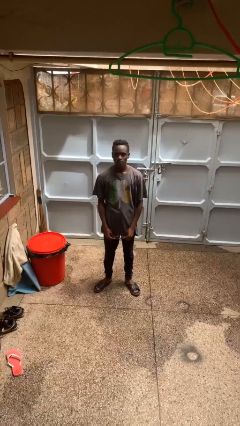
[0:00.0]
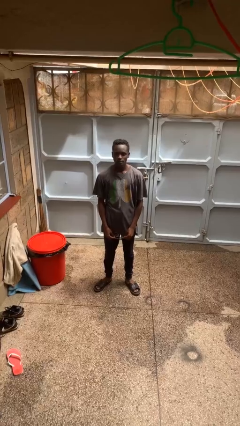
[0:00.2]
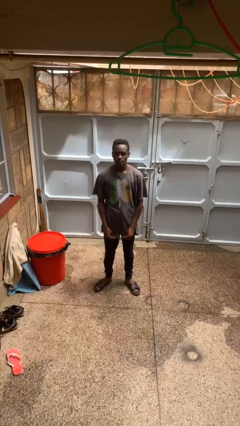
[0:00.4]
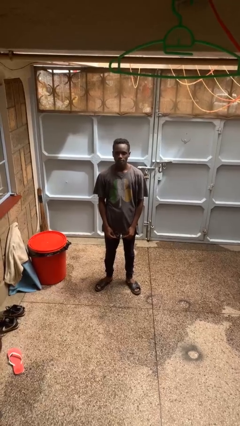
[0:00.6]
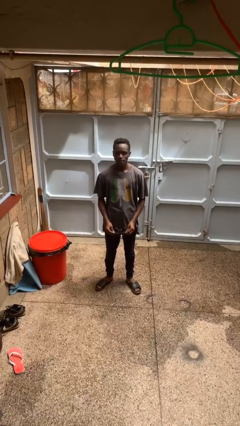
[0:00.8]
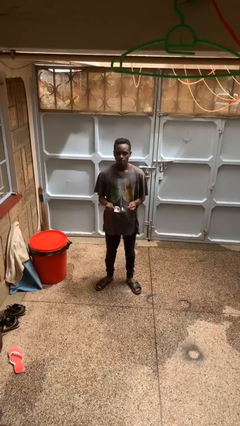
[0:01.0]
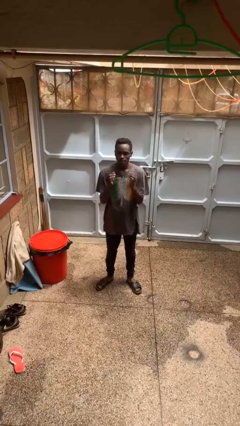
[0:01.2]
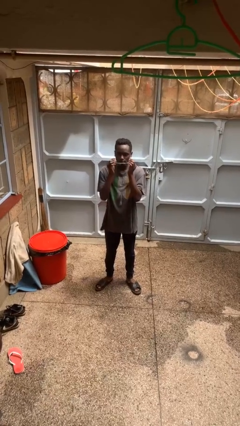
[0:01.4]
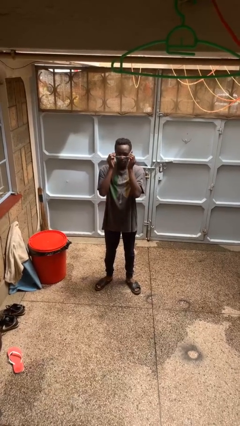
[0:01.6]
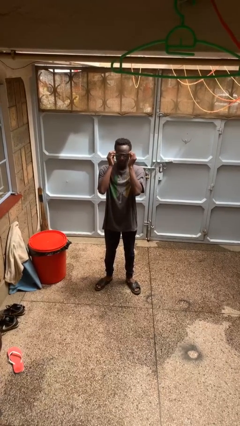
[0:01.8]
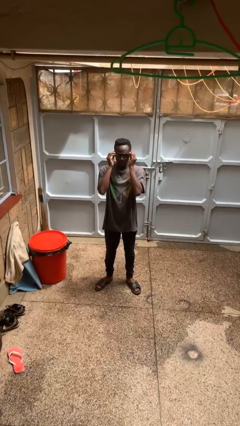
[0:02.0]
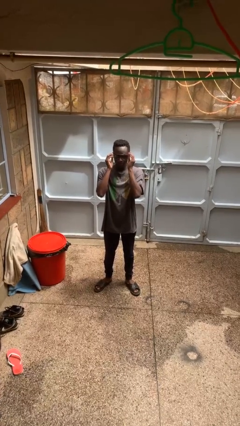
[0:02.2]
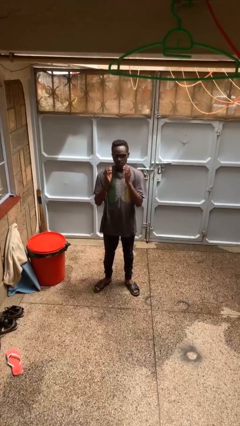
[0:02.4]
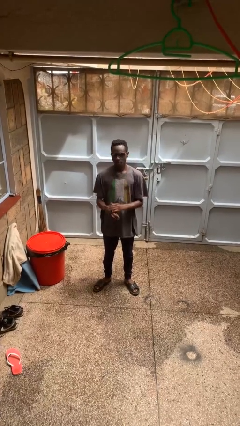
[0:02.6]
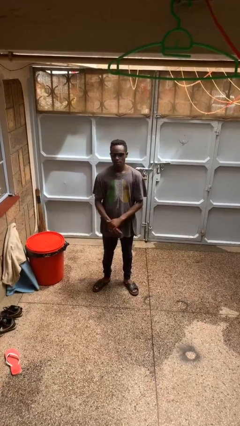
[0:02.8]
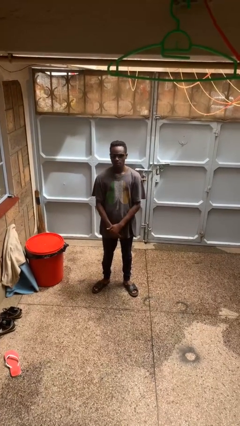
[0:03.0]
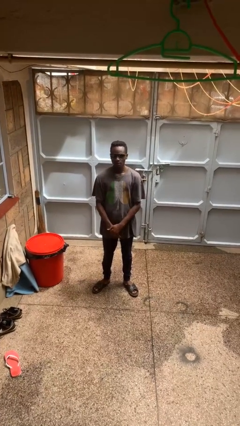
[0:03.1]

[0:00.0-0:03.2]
person puts on sunglasses

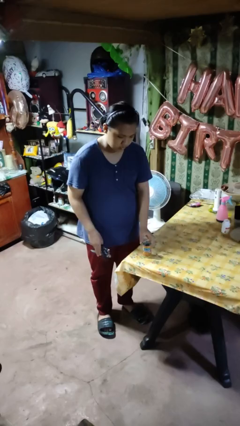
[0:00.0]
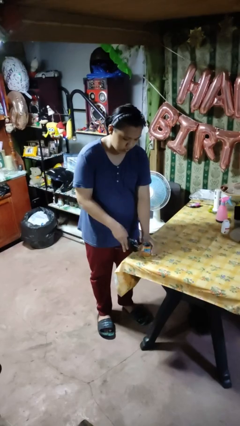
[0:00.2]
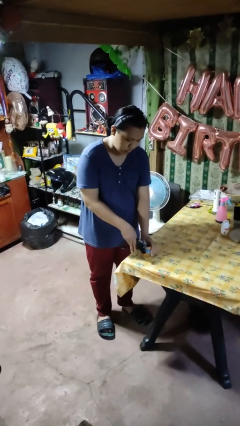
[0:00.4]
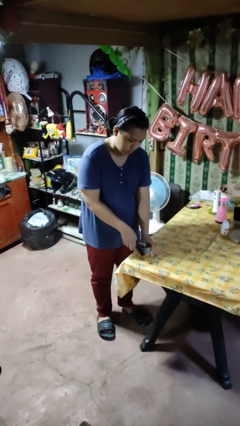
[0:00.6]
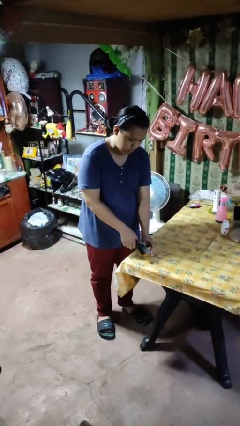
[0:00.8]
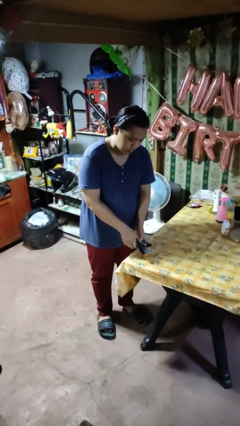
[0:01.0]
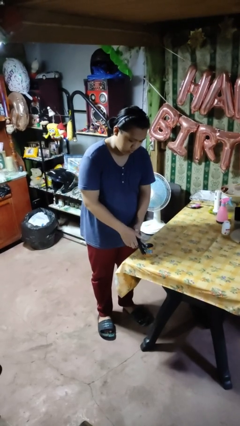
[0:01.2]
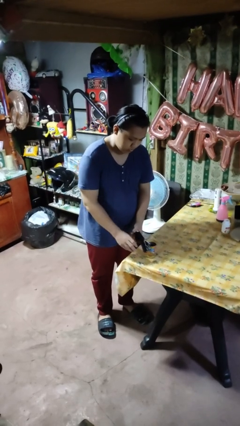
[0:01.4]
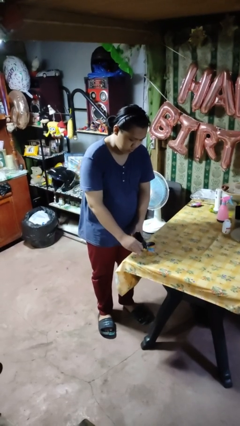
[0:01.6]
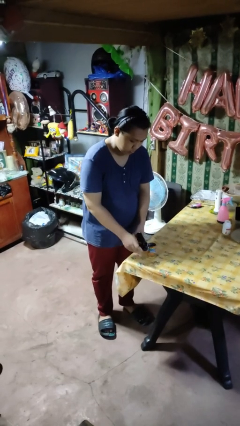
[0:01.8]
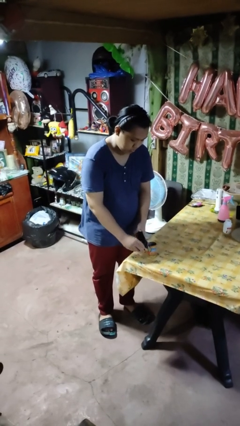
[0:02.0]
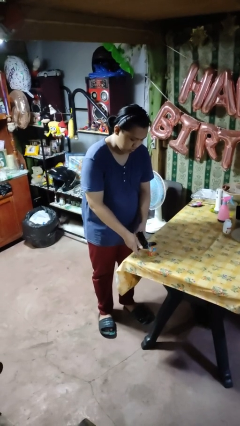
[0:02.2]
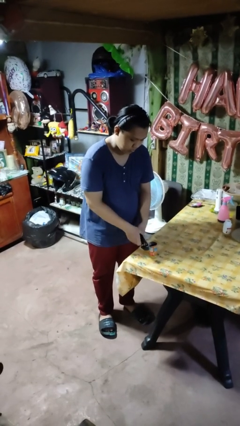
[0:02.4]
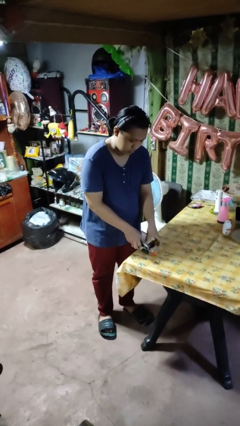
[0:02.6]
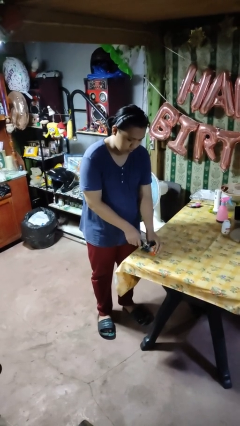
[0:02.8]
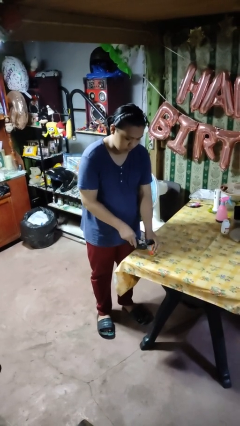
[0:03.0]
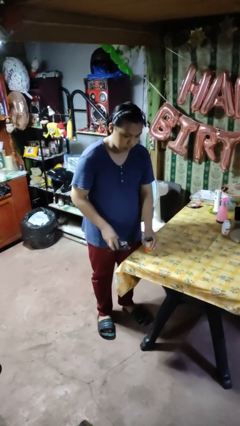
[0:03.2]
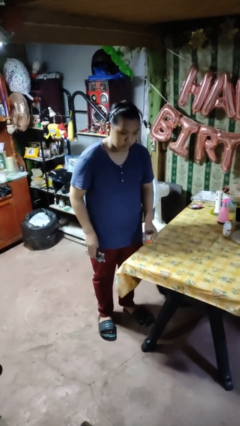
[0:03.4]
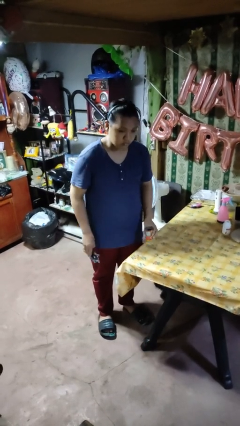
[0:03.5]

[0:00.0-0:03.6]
person opens can with can opener

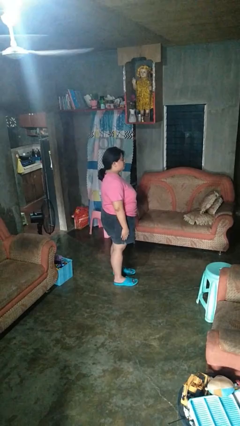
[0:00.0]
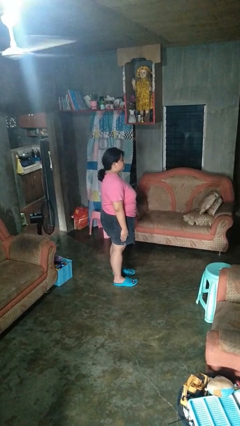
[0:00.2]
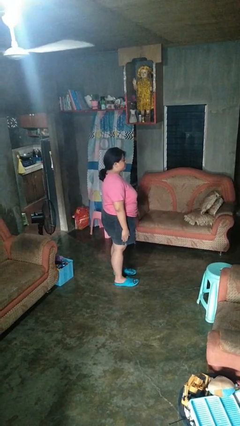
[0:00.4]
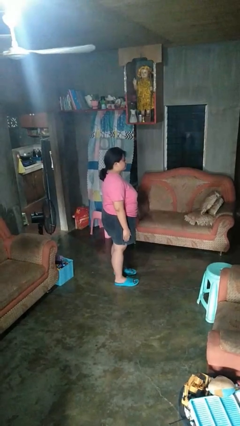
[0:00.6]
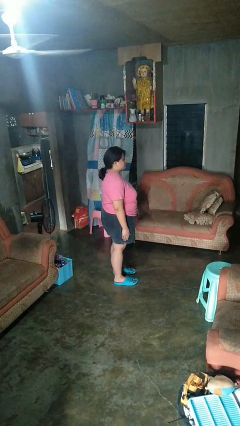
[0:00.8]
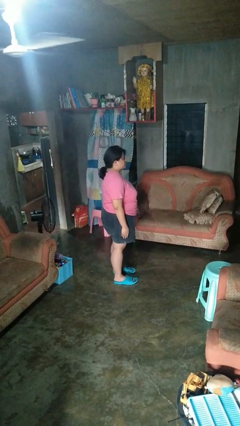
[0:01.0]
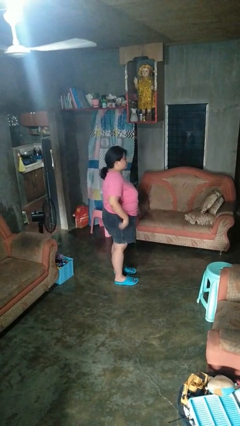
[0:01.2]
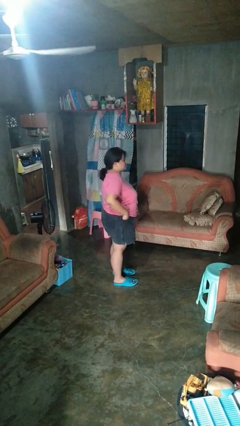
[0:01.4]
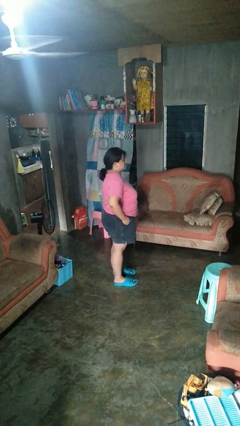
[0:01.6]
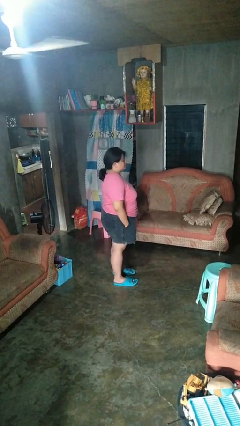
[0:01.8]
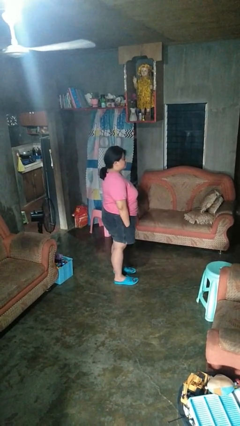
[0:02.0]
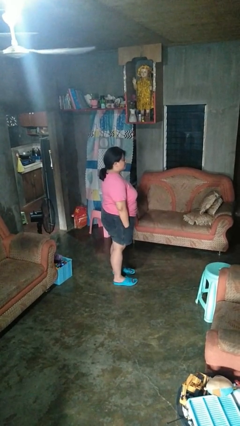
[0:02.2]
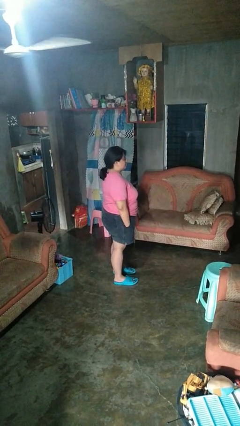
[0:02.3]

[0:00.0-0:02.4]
person puts hands in back pockets

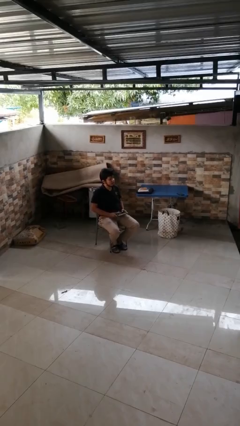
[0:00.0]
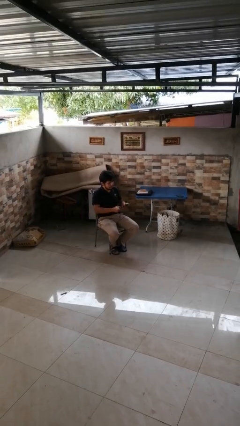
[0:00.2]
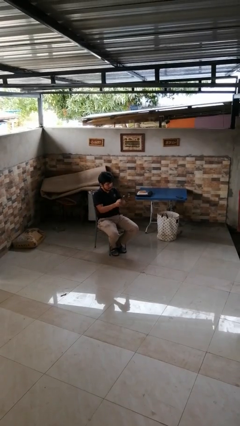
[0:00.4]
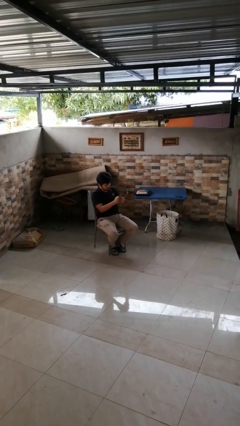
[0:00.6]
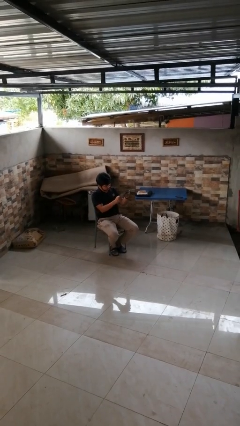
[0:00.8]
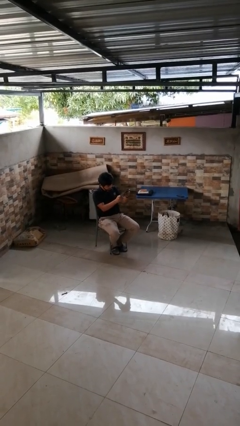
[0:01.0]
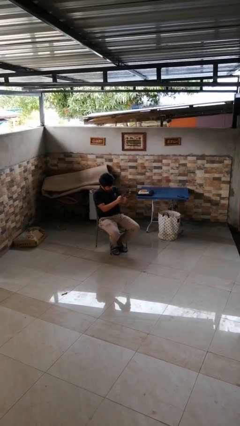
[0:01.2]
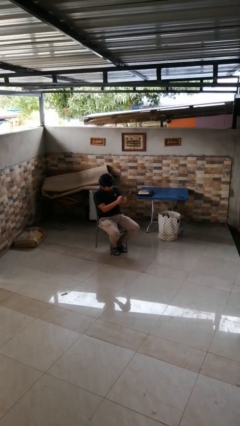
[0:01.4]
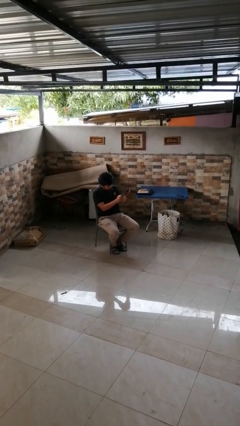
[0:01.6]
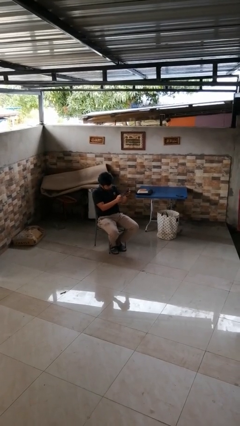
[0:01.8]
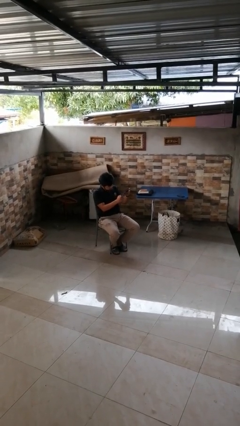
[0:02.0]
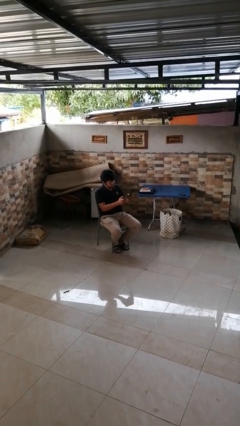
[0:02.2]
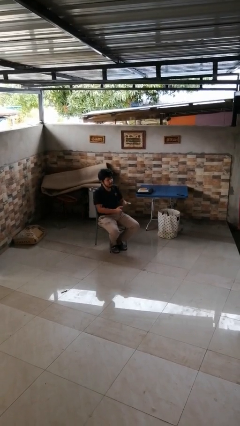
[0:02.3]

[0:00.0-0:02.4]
person interacts with handheld game

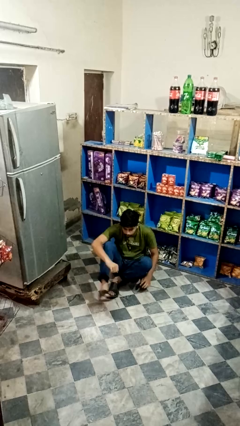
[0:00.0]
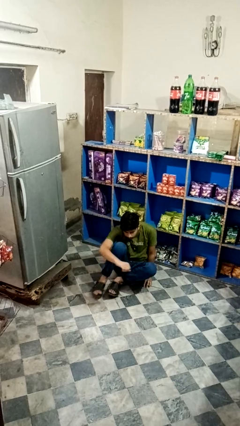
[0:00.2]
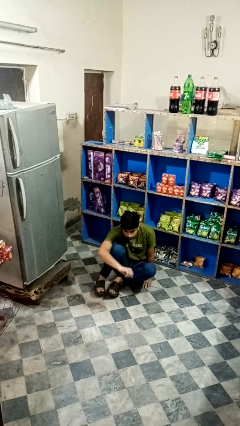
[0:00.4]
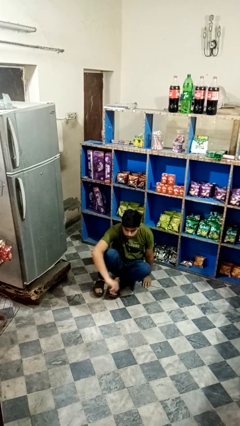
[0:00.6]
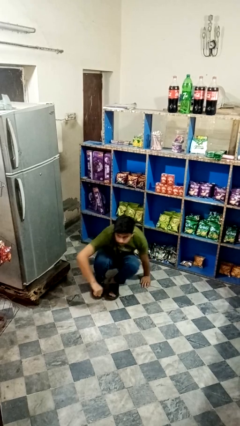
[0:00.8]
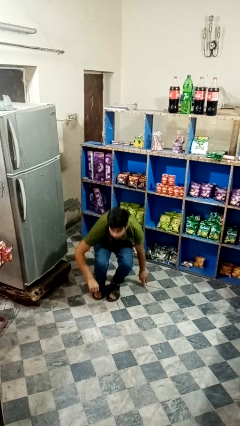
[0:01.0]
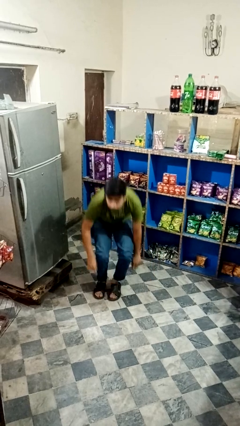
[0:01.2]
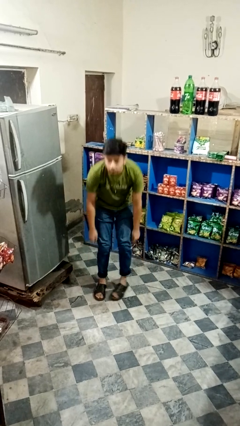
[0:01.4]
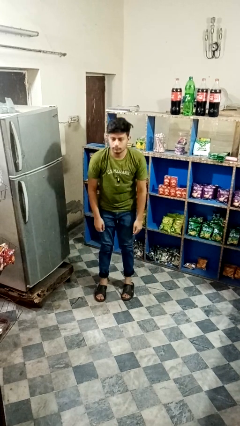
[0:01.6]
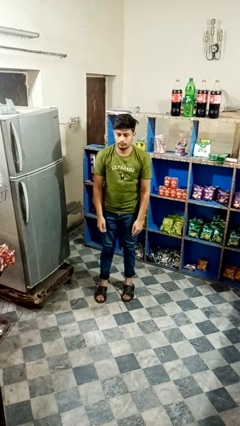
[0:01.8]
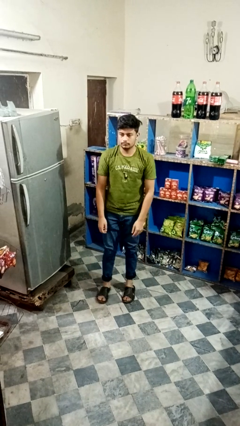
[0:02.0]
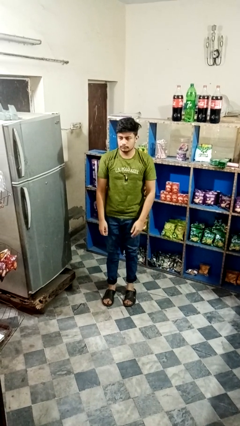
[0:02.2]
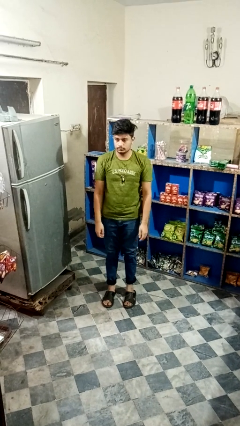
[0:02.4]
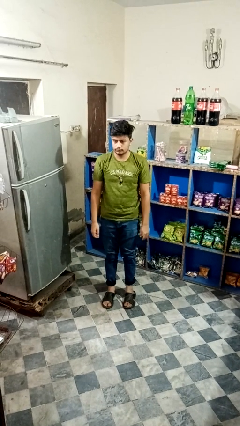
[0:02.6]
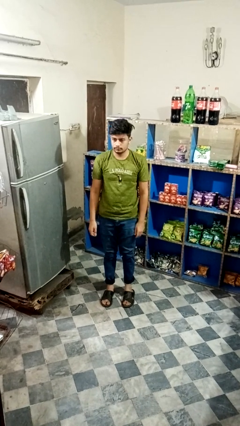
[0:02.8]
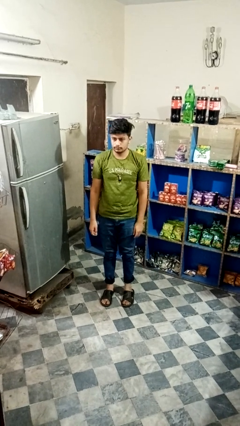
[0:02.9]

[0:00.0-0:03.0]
person stands up from floor

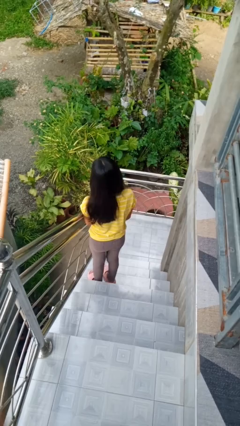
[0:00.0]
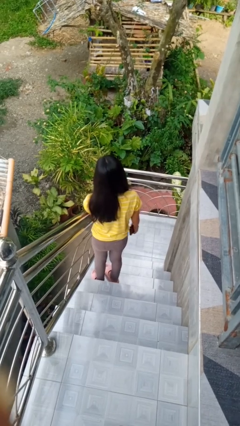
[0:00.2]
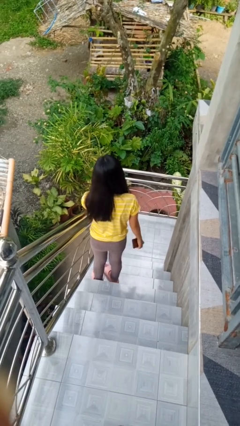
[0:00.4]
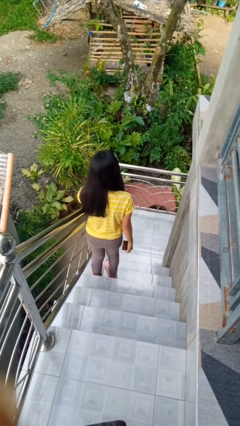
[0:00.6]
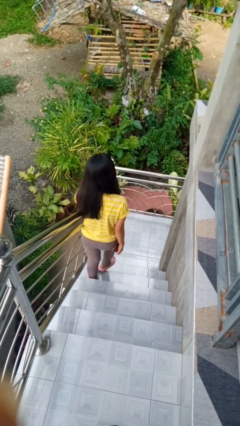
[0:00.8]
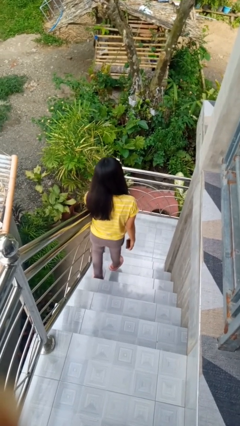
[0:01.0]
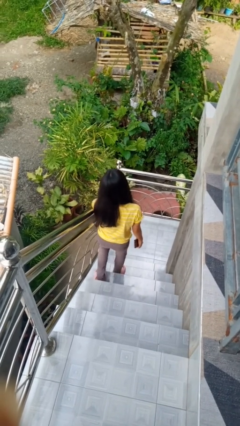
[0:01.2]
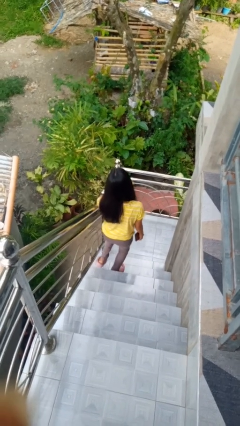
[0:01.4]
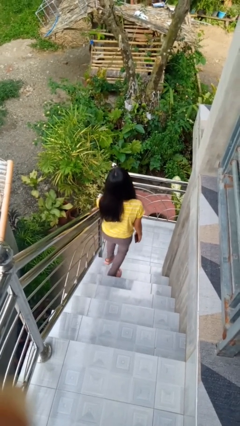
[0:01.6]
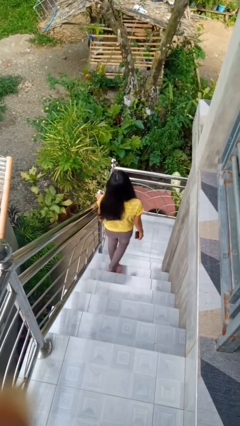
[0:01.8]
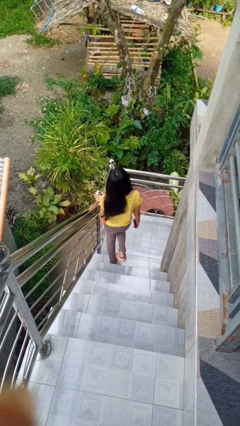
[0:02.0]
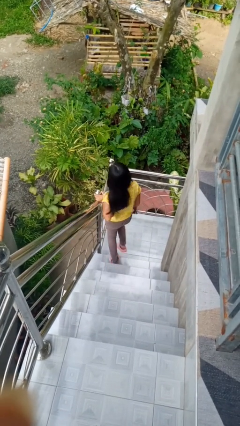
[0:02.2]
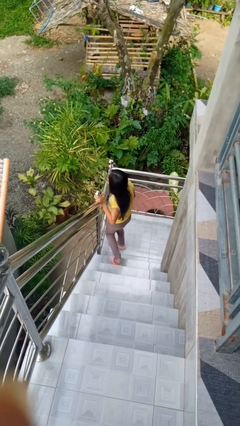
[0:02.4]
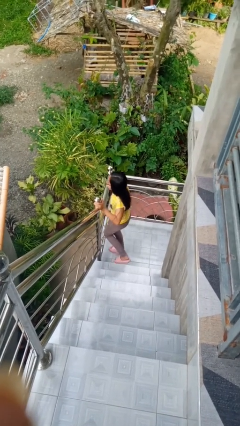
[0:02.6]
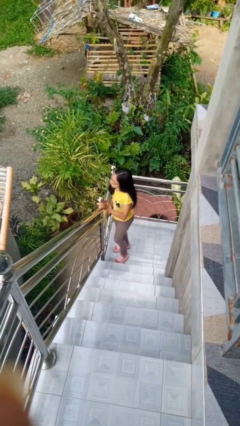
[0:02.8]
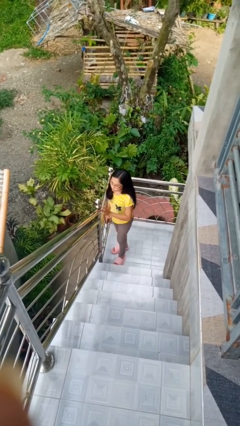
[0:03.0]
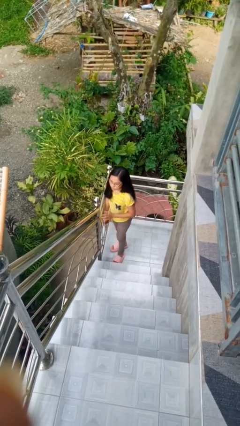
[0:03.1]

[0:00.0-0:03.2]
person climbs down stairs
